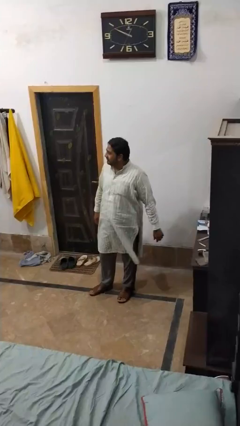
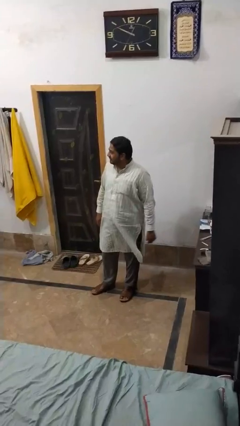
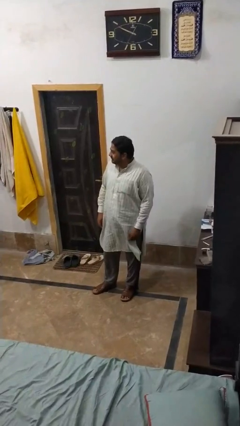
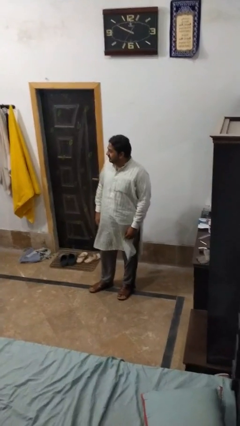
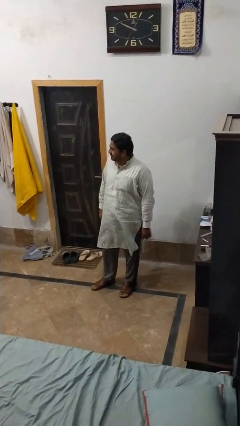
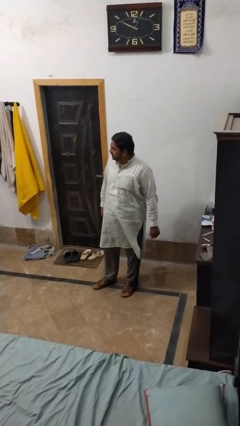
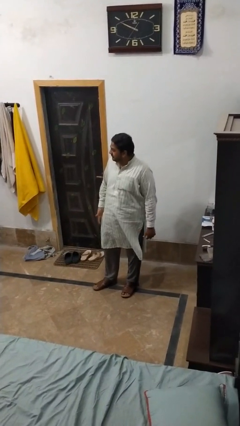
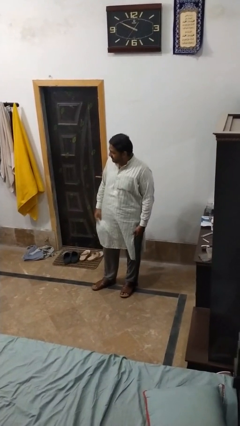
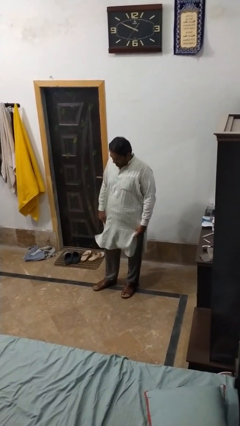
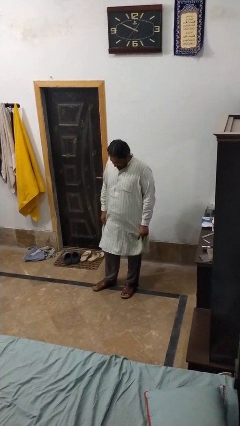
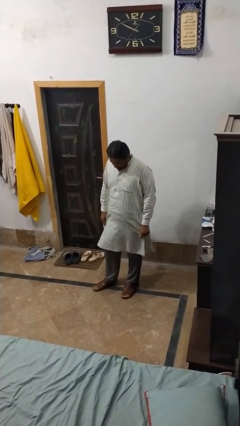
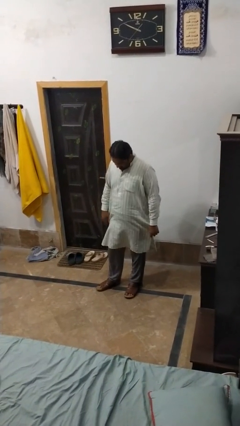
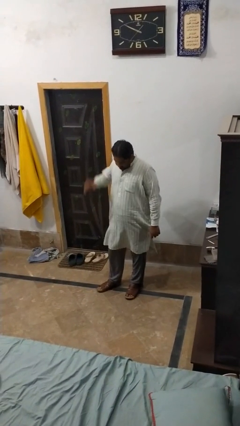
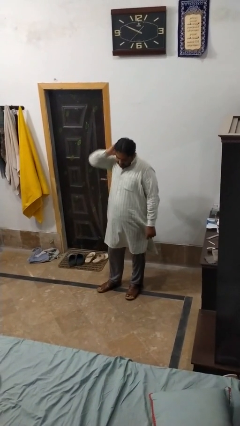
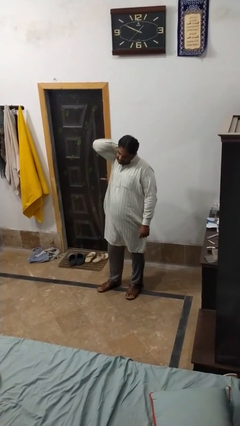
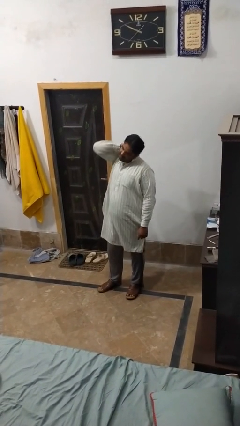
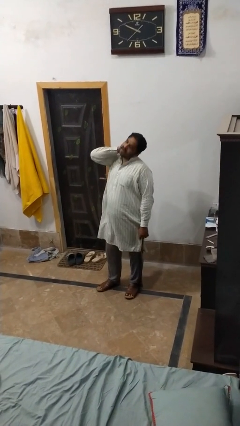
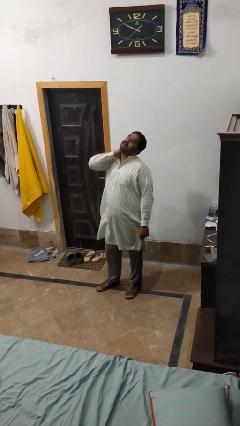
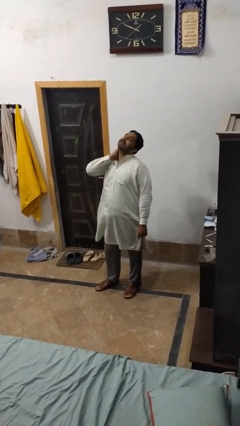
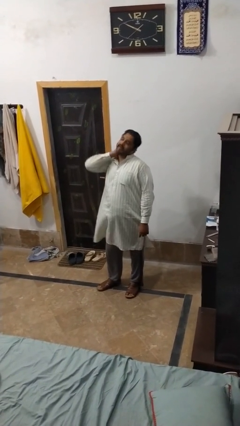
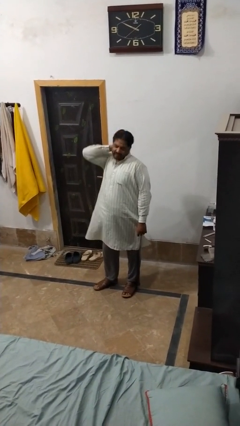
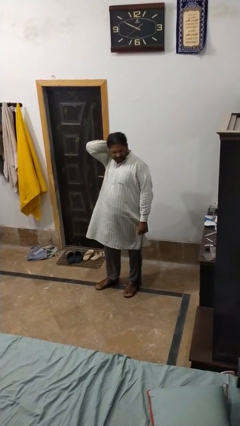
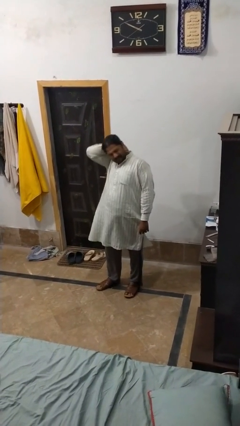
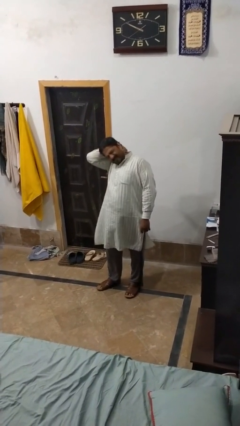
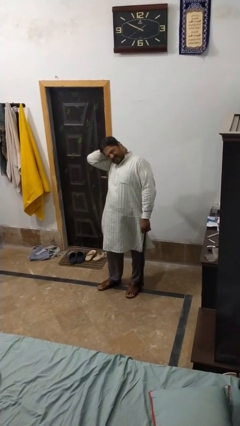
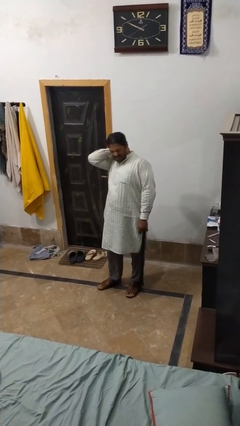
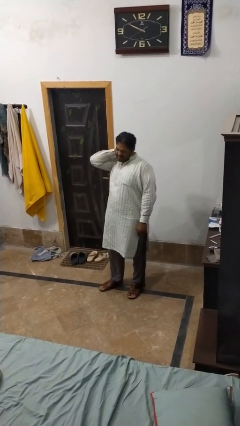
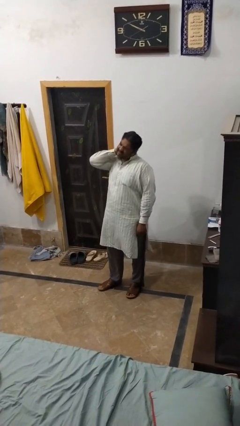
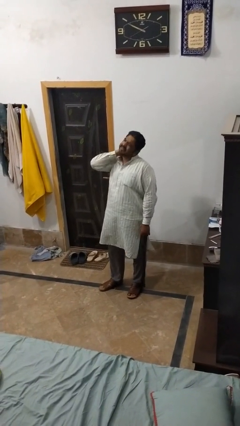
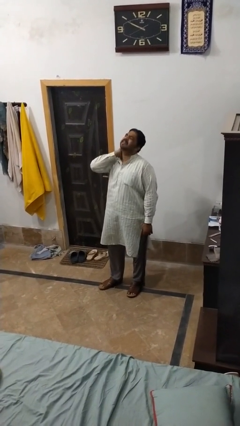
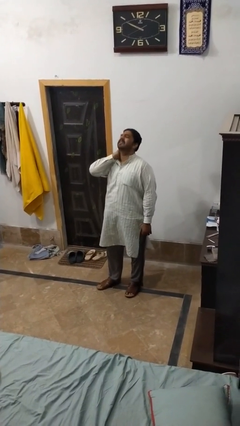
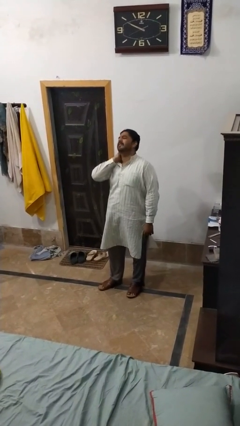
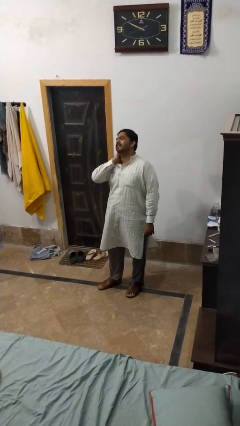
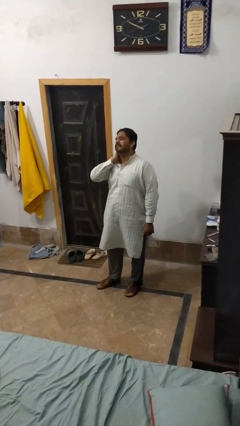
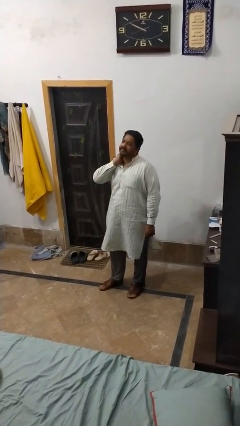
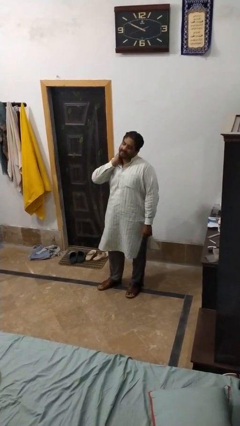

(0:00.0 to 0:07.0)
person rubs neck

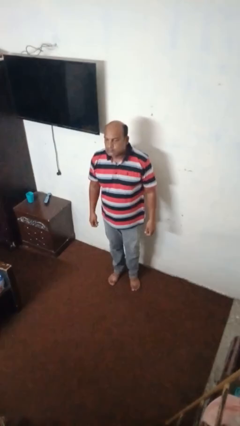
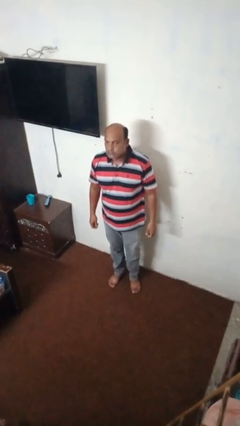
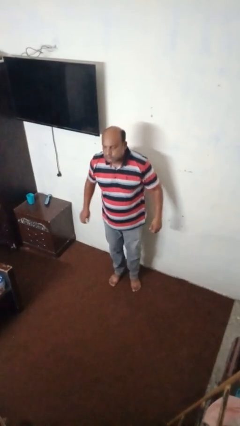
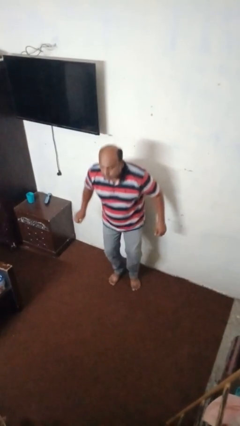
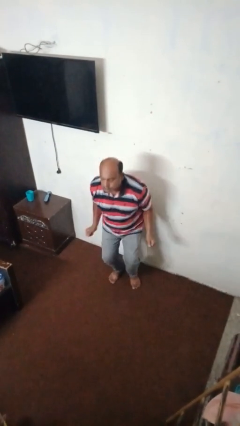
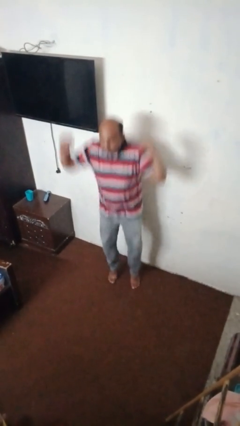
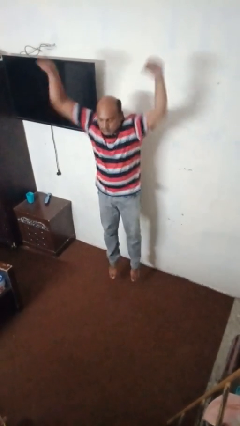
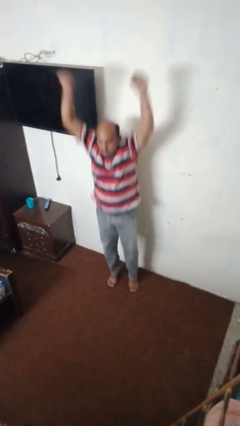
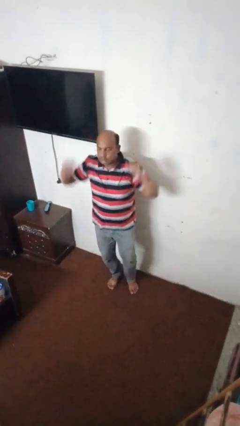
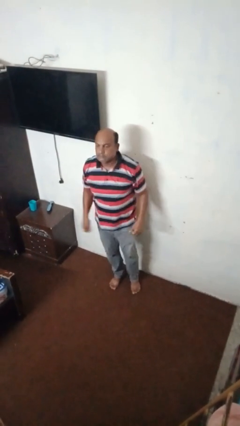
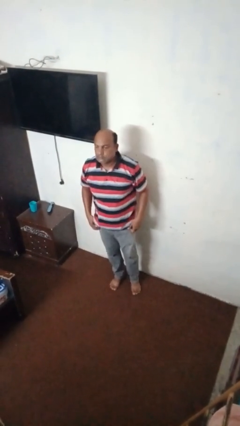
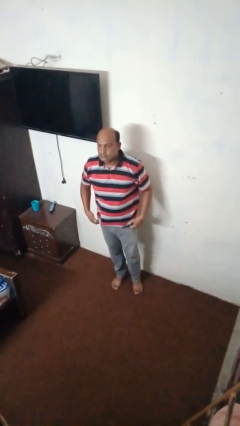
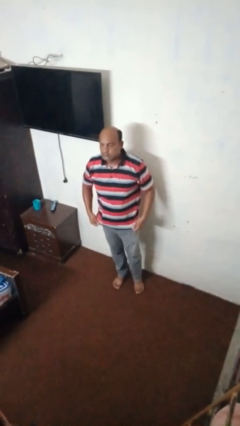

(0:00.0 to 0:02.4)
person jumps

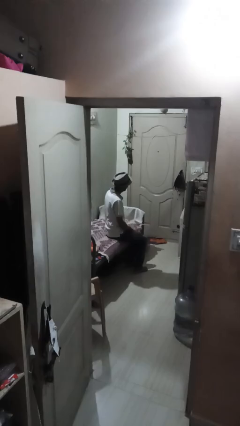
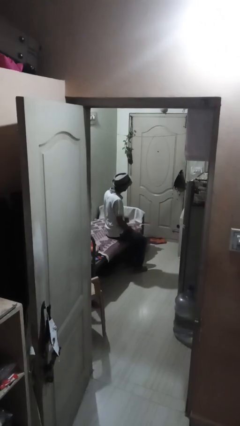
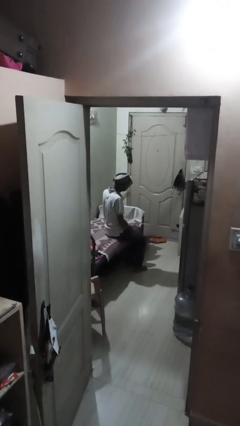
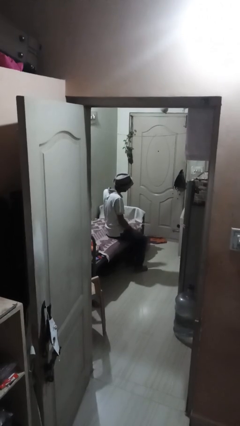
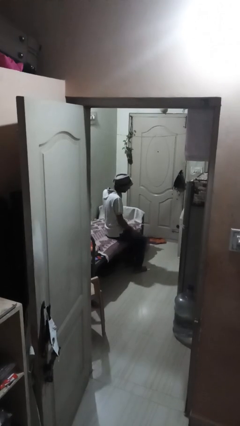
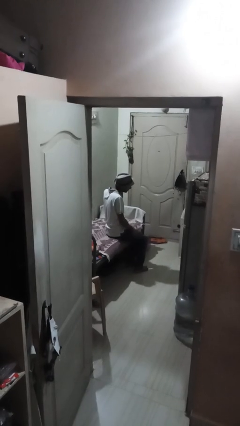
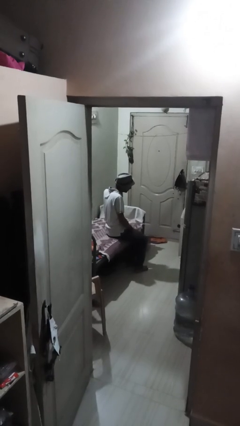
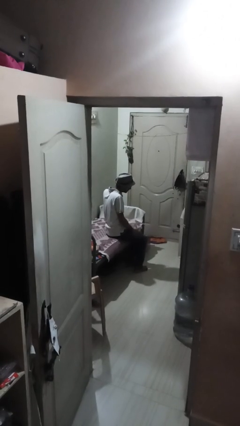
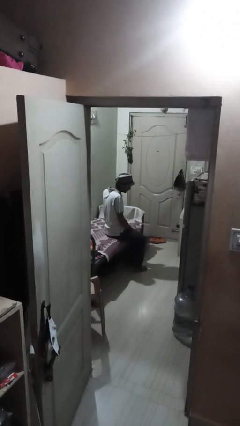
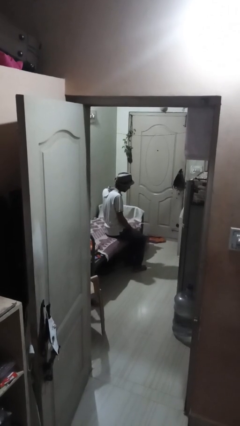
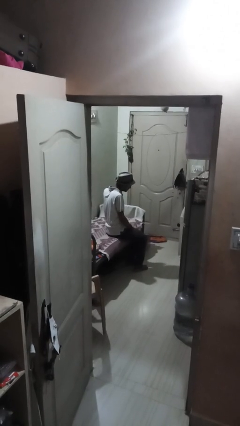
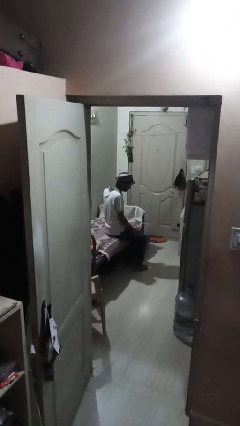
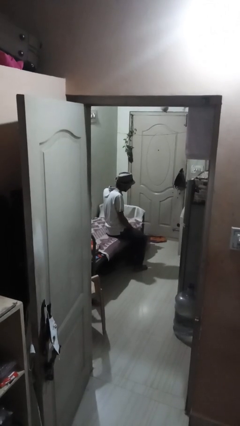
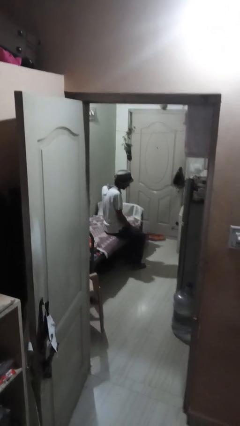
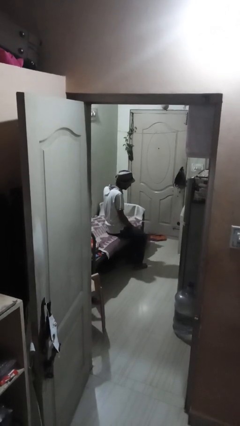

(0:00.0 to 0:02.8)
person gestures listen closely

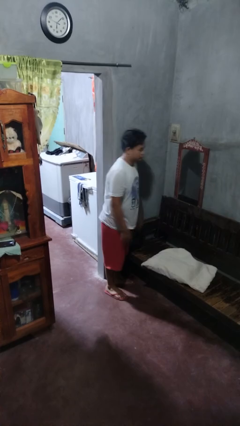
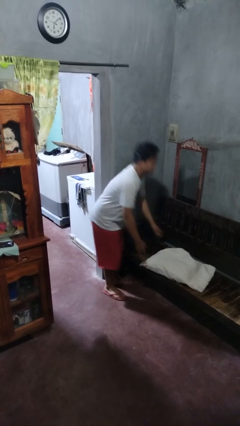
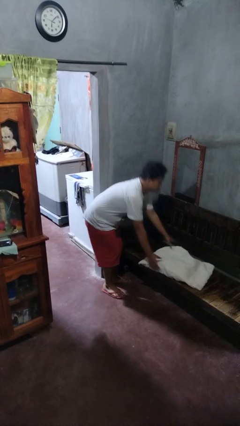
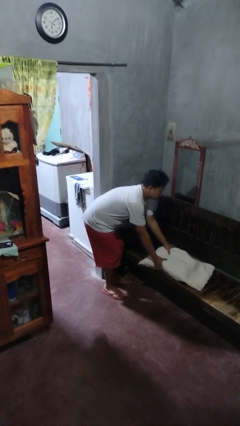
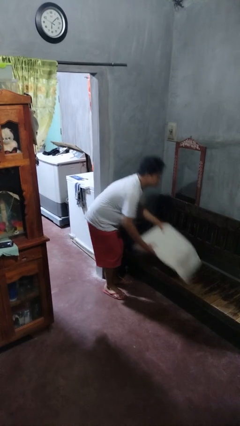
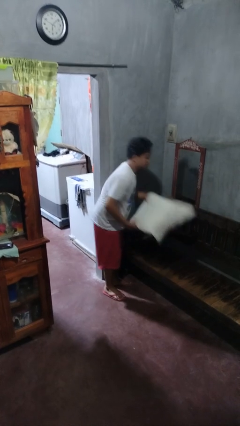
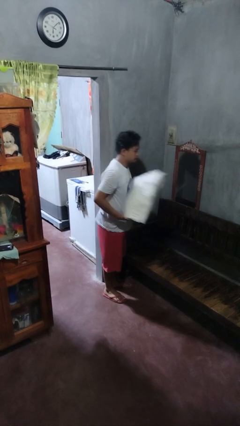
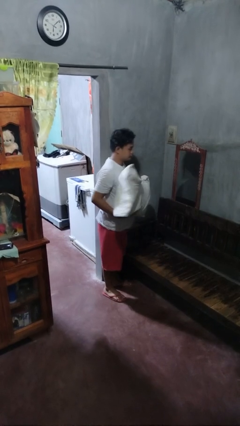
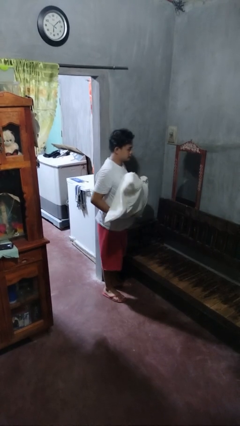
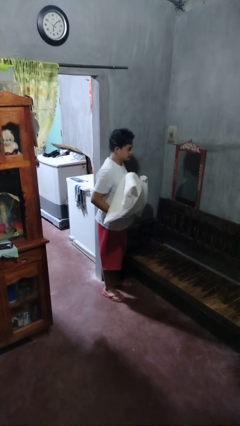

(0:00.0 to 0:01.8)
person picks up object from couch

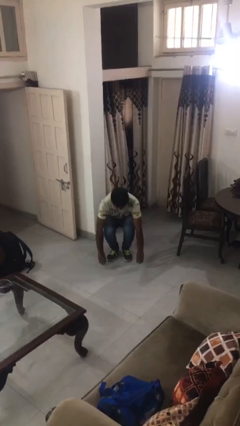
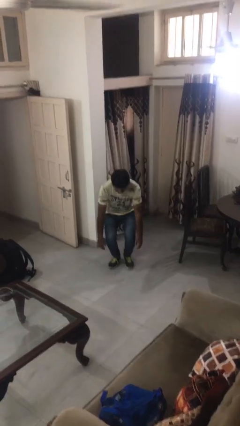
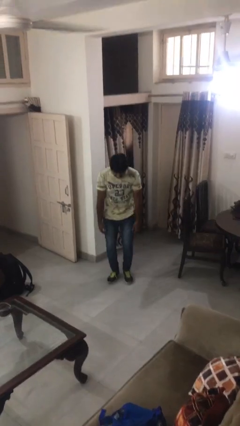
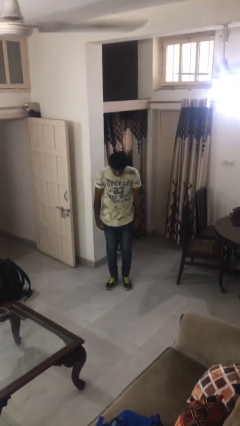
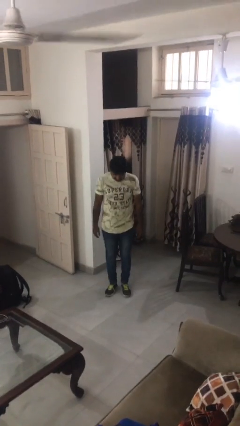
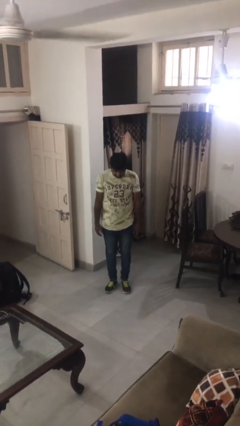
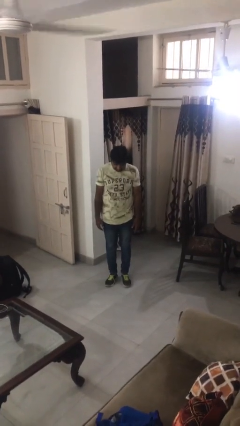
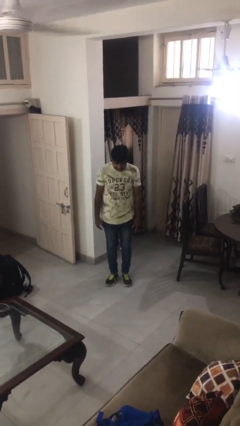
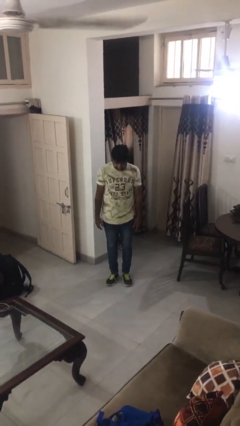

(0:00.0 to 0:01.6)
person stands up

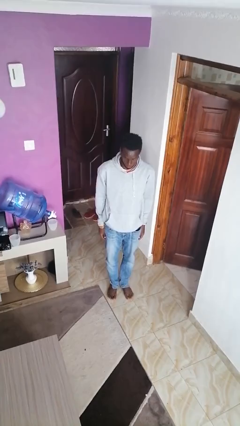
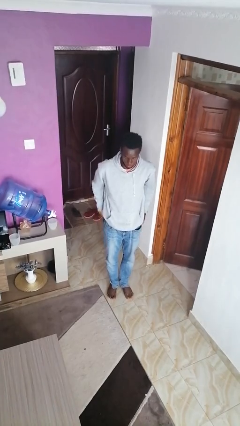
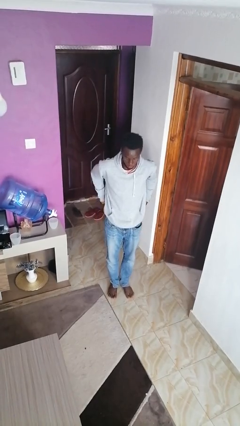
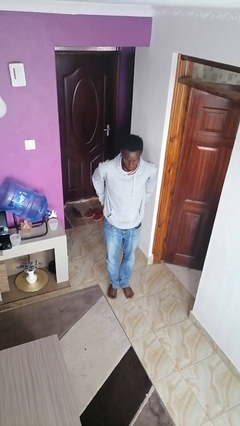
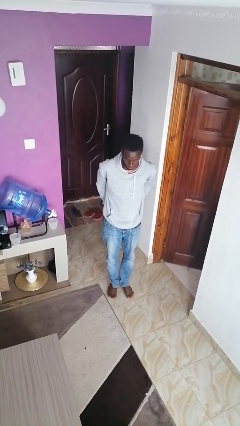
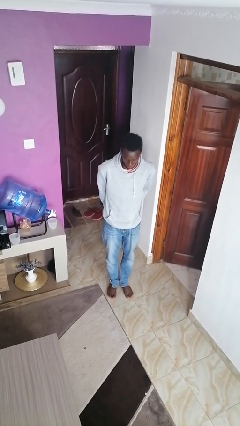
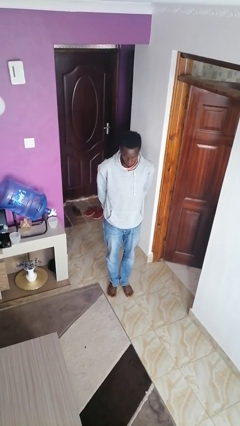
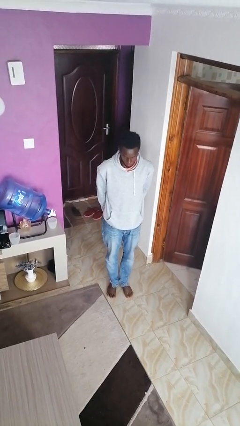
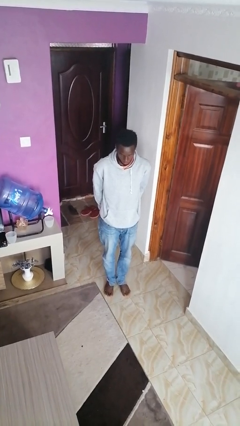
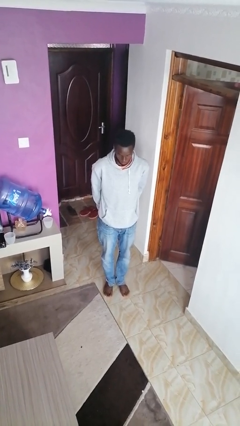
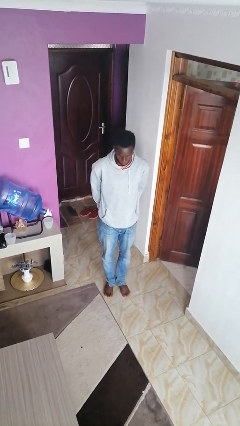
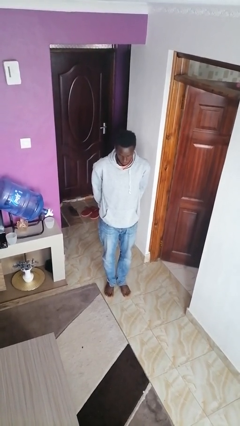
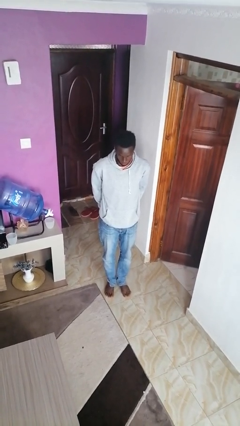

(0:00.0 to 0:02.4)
person puts hands in back pockets
